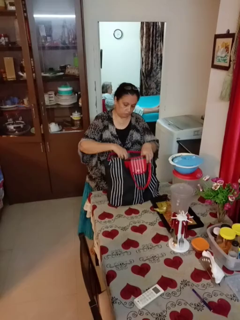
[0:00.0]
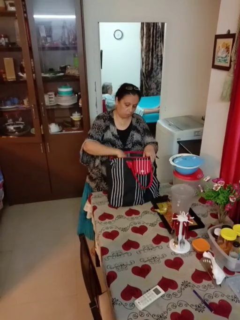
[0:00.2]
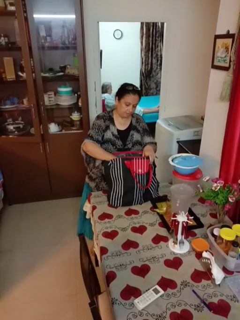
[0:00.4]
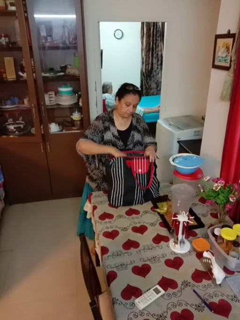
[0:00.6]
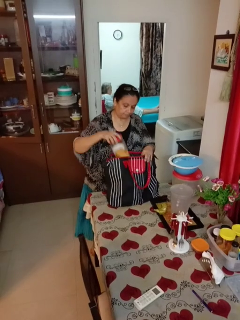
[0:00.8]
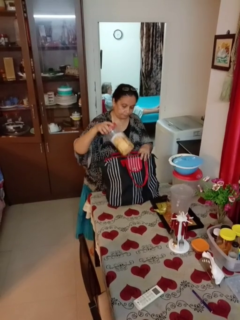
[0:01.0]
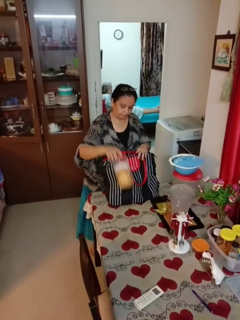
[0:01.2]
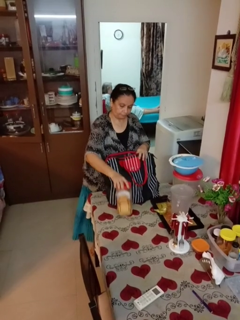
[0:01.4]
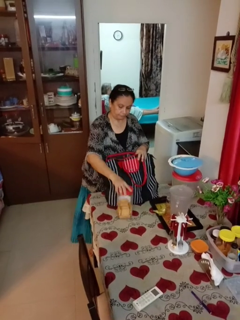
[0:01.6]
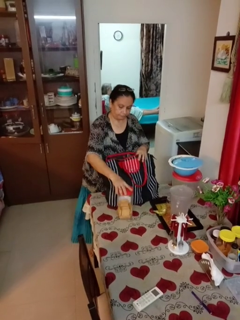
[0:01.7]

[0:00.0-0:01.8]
person takes object from bag

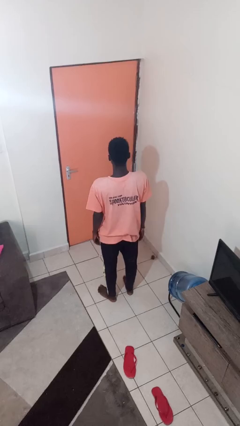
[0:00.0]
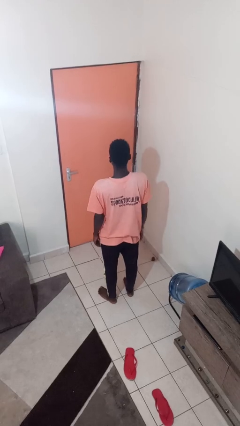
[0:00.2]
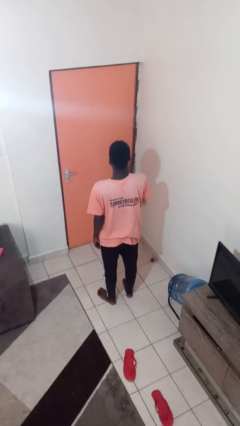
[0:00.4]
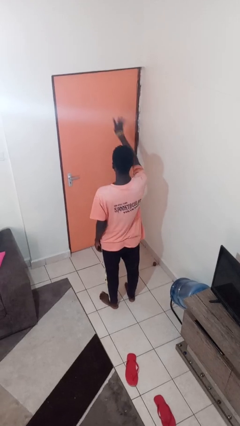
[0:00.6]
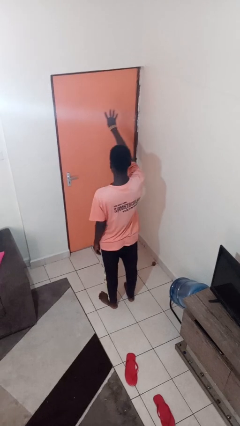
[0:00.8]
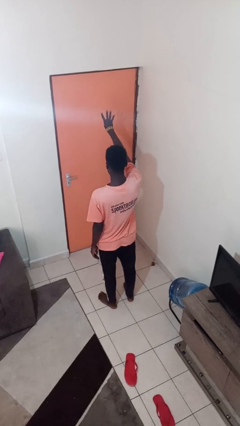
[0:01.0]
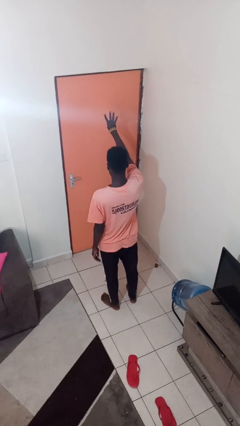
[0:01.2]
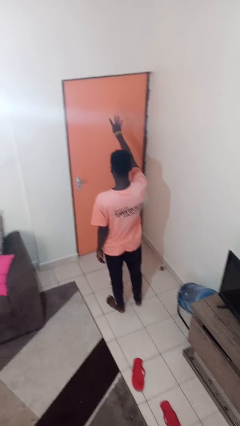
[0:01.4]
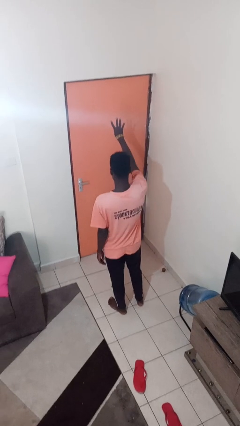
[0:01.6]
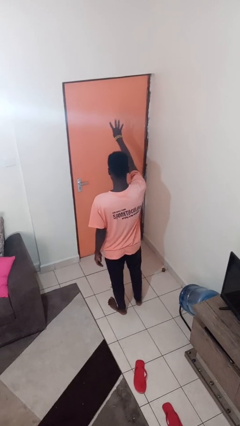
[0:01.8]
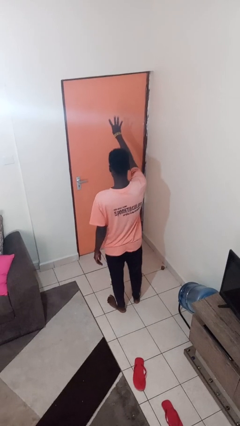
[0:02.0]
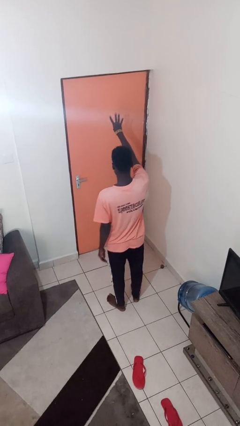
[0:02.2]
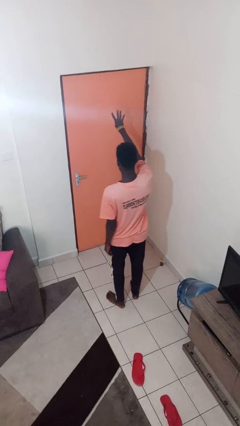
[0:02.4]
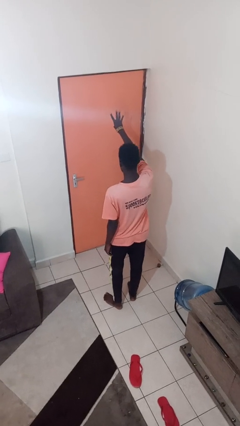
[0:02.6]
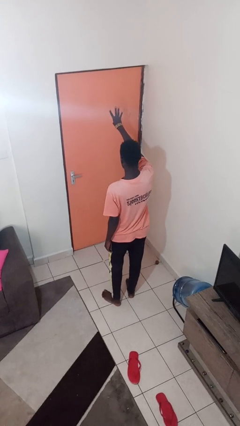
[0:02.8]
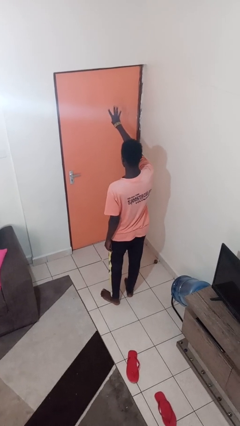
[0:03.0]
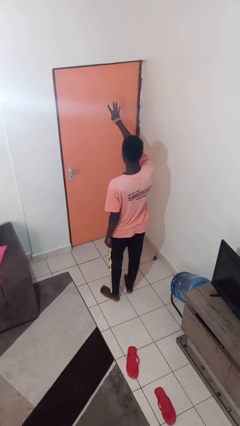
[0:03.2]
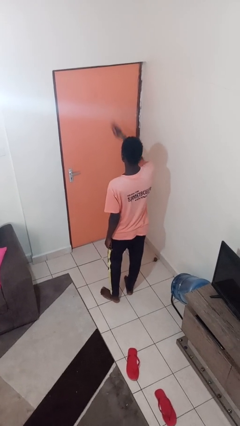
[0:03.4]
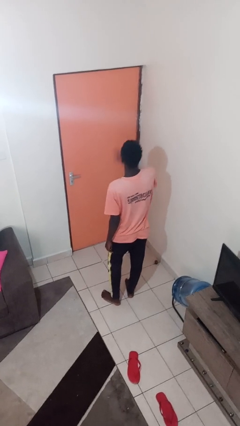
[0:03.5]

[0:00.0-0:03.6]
person gestures number four

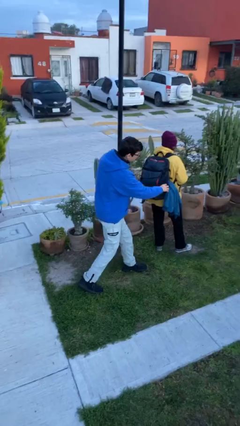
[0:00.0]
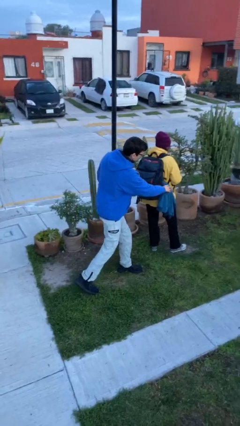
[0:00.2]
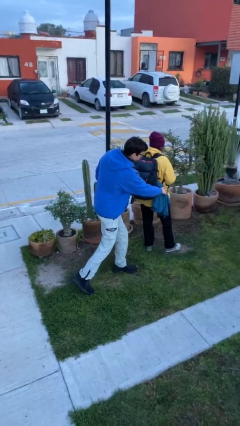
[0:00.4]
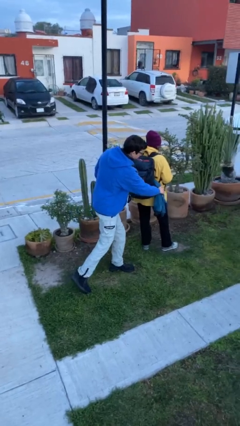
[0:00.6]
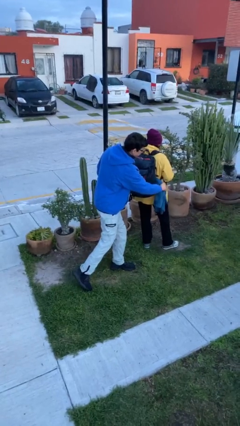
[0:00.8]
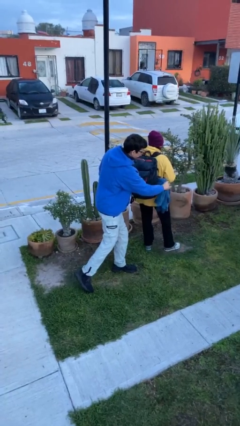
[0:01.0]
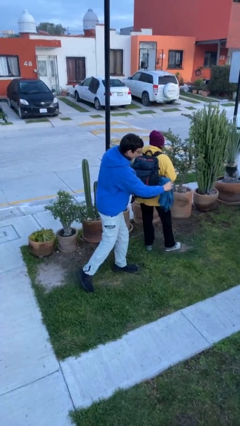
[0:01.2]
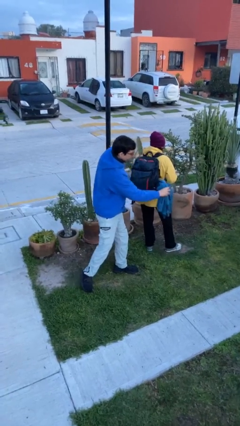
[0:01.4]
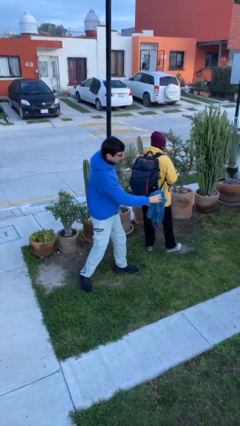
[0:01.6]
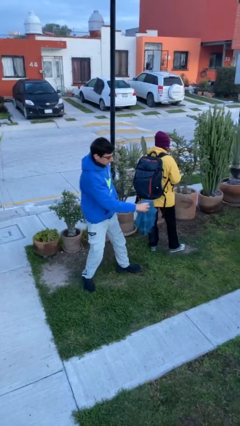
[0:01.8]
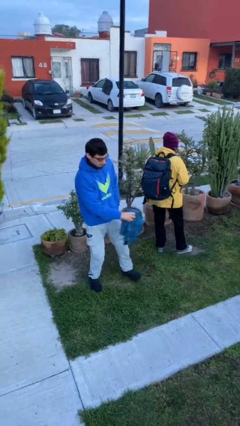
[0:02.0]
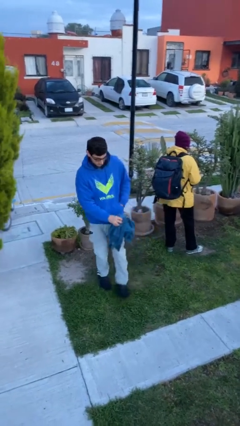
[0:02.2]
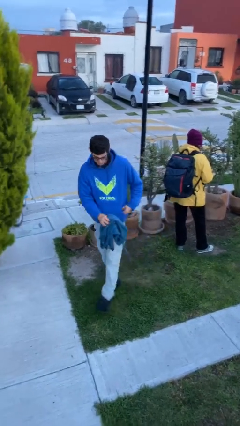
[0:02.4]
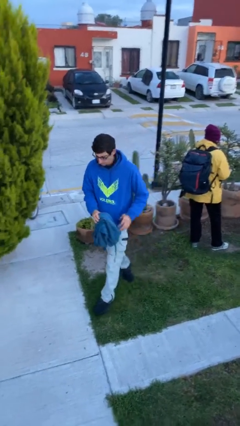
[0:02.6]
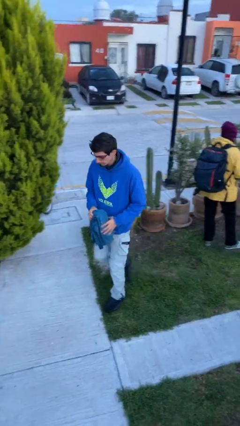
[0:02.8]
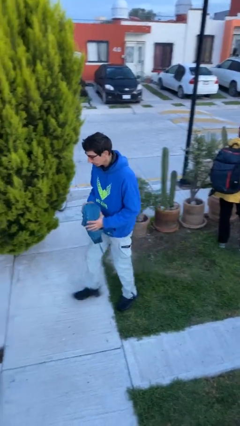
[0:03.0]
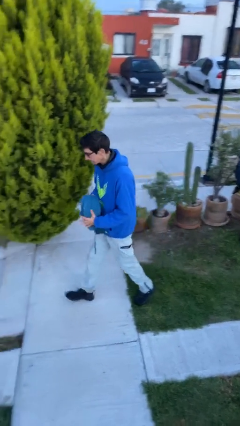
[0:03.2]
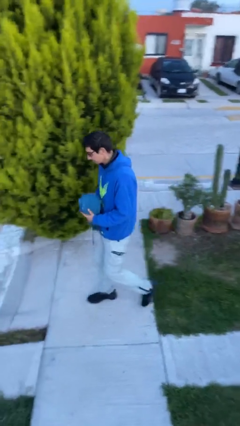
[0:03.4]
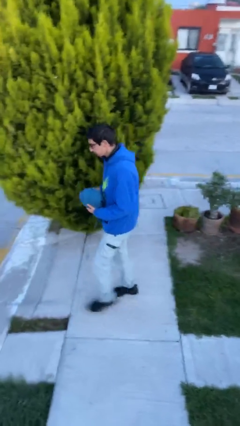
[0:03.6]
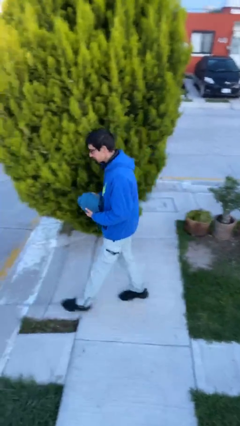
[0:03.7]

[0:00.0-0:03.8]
person steals object from person

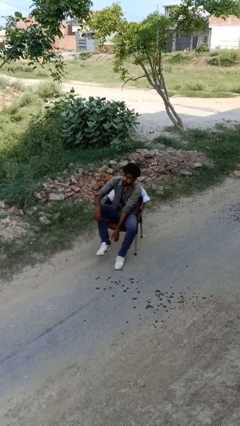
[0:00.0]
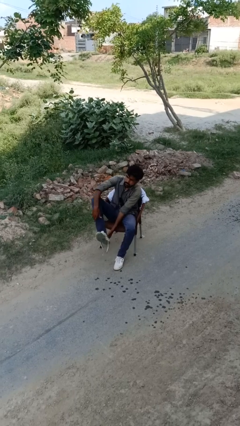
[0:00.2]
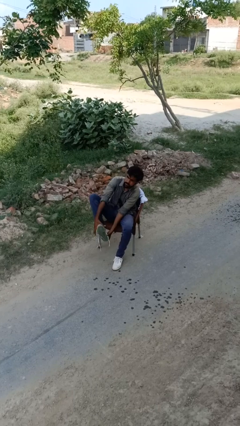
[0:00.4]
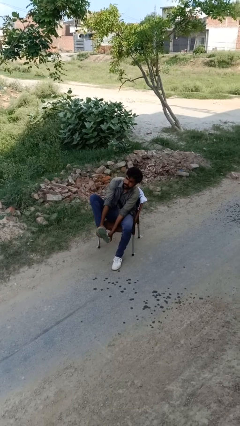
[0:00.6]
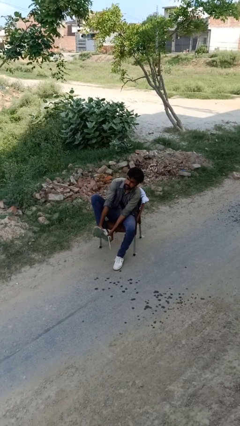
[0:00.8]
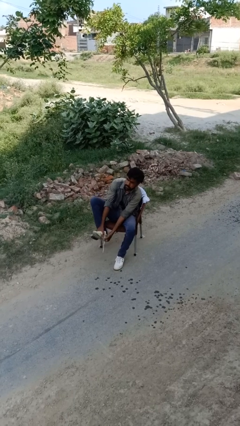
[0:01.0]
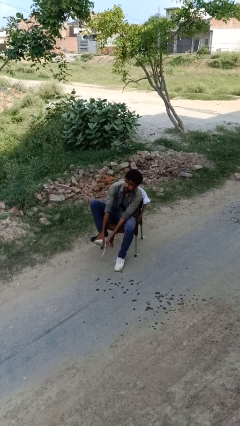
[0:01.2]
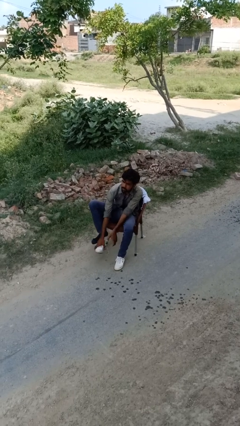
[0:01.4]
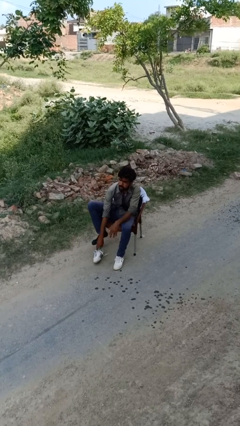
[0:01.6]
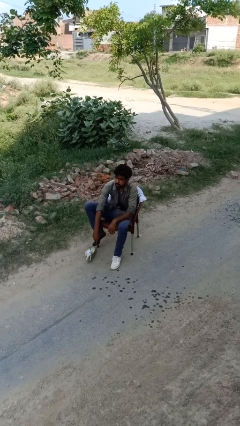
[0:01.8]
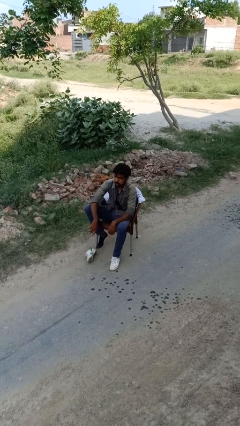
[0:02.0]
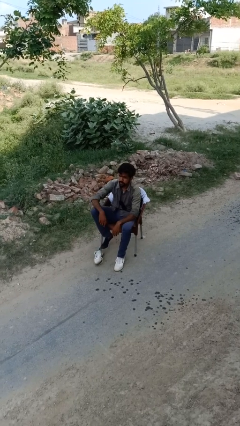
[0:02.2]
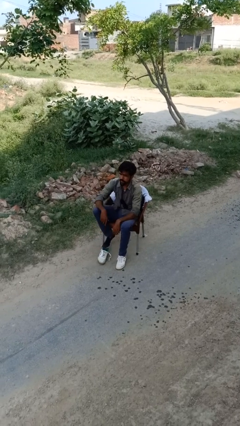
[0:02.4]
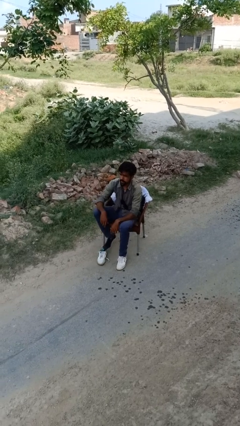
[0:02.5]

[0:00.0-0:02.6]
person takes off shoes

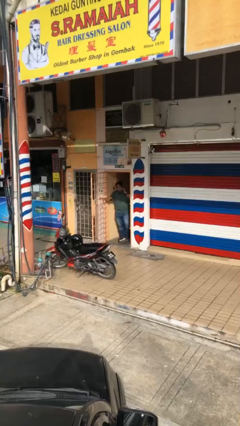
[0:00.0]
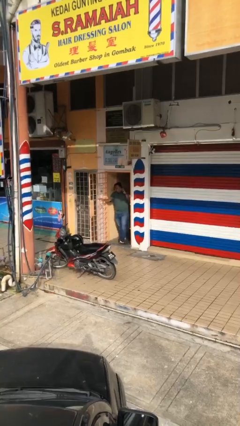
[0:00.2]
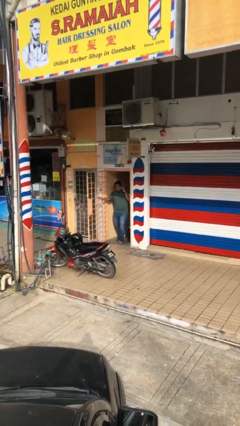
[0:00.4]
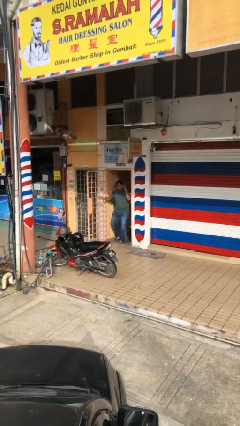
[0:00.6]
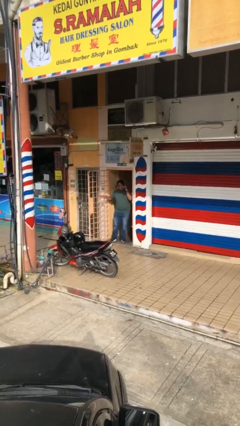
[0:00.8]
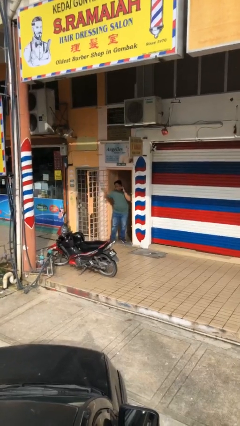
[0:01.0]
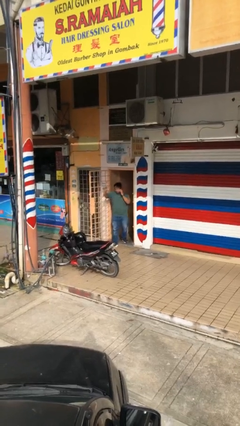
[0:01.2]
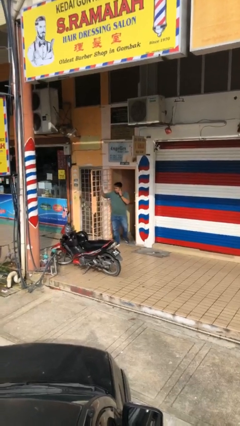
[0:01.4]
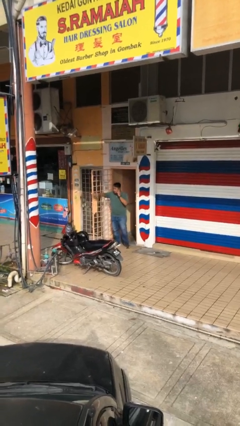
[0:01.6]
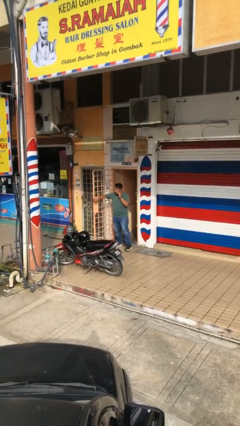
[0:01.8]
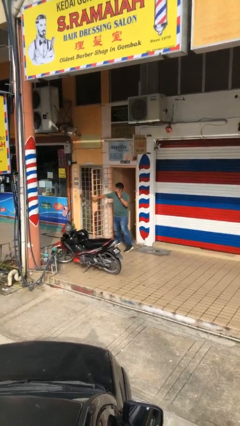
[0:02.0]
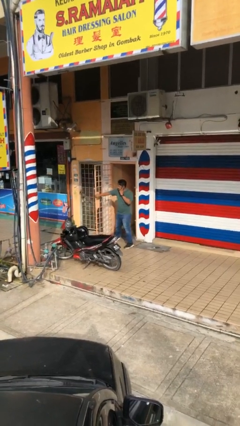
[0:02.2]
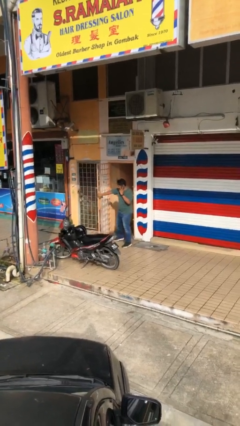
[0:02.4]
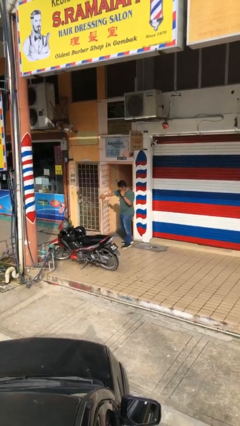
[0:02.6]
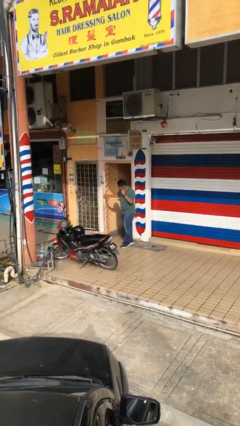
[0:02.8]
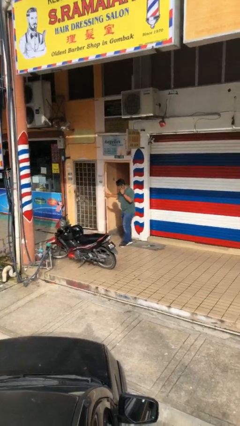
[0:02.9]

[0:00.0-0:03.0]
person enters scene through structure

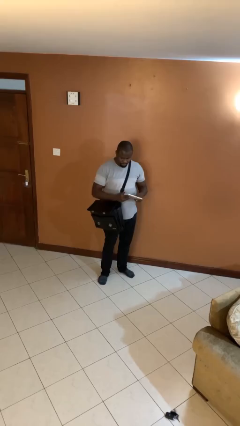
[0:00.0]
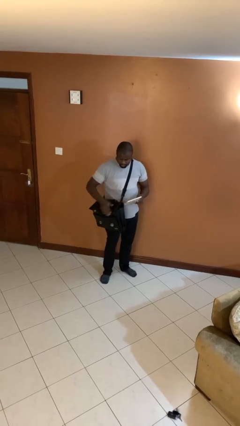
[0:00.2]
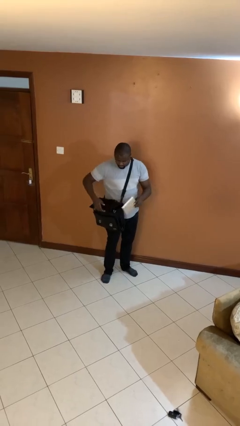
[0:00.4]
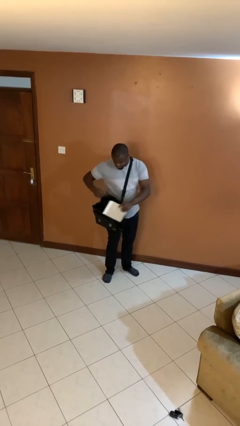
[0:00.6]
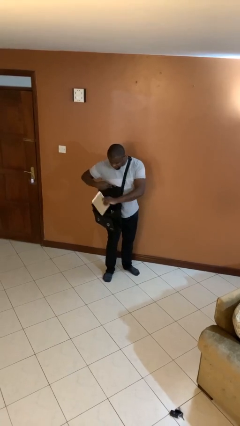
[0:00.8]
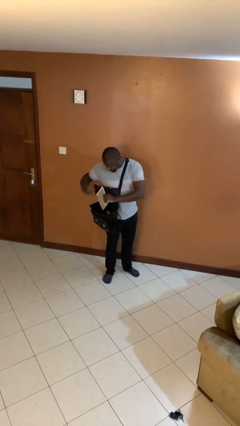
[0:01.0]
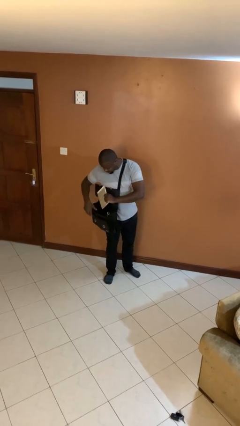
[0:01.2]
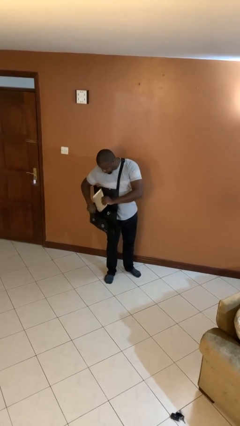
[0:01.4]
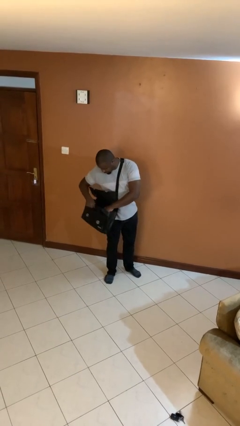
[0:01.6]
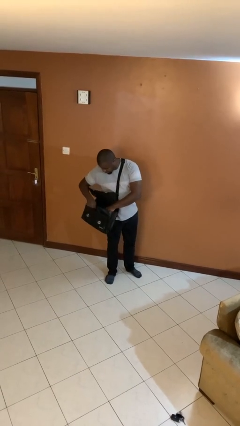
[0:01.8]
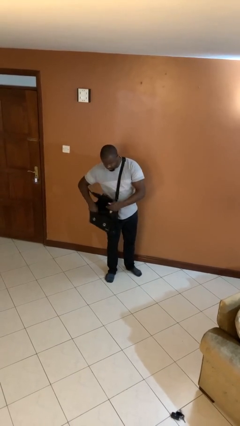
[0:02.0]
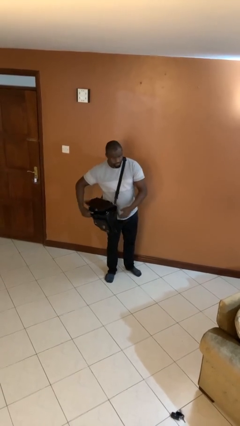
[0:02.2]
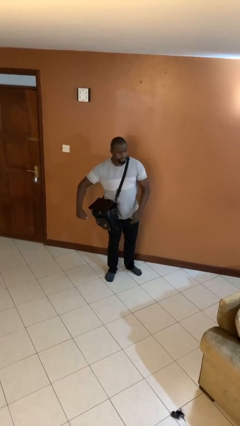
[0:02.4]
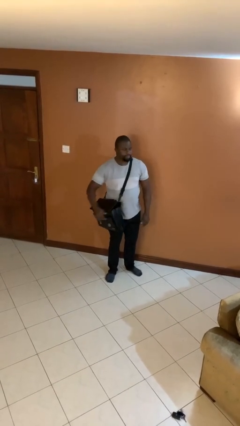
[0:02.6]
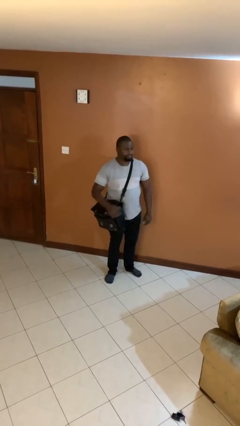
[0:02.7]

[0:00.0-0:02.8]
person puts object into purse
